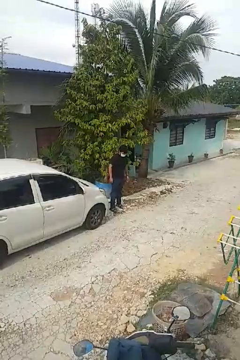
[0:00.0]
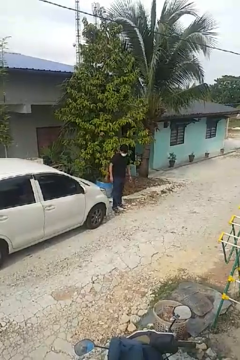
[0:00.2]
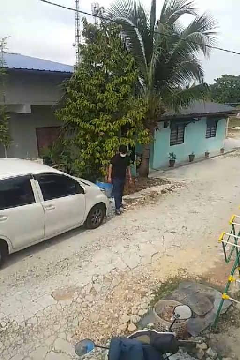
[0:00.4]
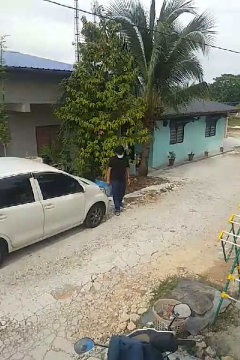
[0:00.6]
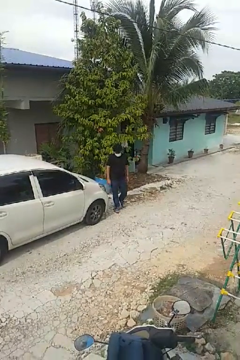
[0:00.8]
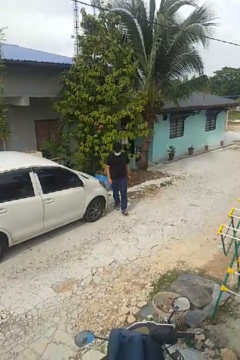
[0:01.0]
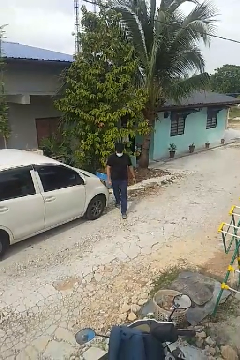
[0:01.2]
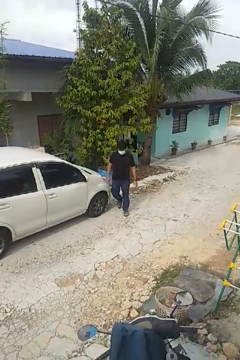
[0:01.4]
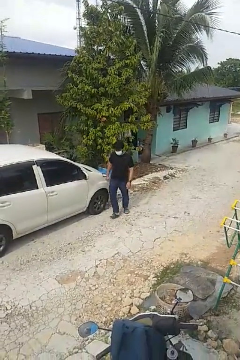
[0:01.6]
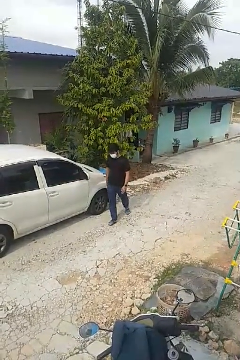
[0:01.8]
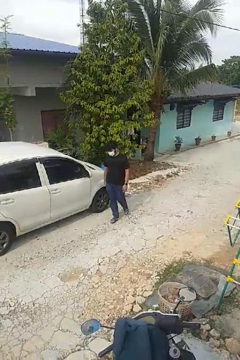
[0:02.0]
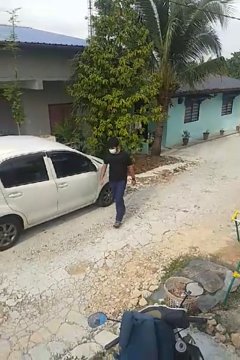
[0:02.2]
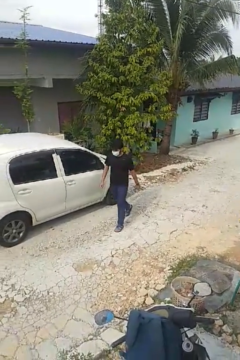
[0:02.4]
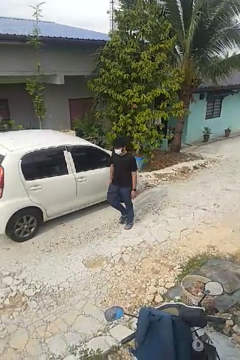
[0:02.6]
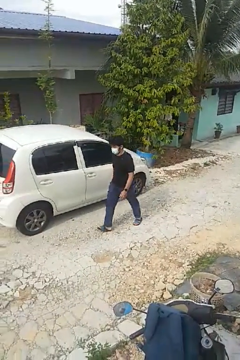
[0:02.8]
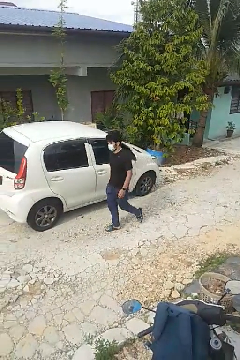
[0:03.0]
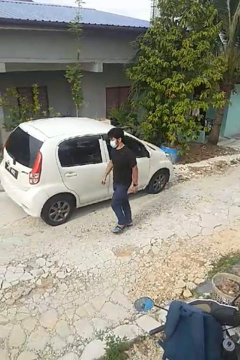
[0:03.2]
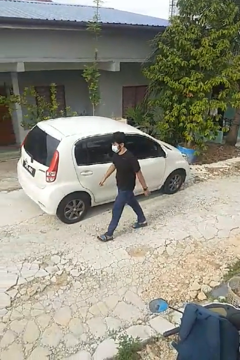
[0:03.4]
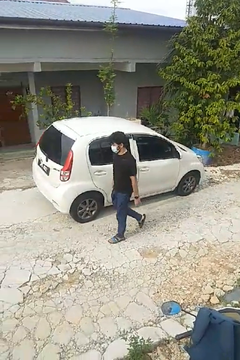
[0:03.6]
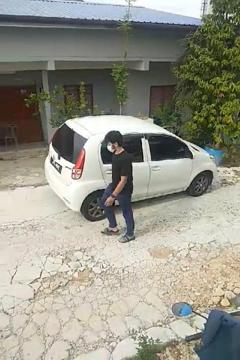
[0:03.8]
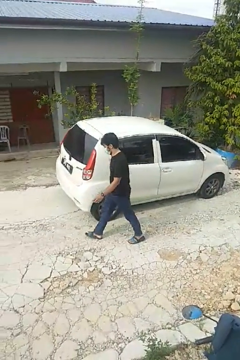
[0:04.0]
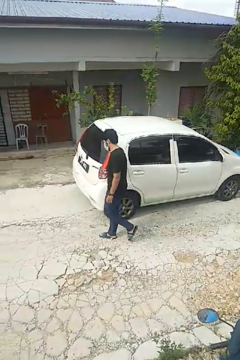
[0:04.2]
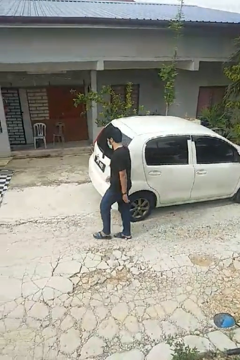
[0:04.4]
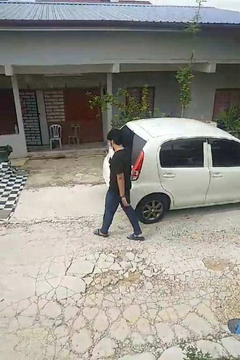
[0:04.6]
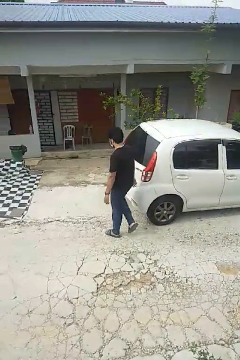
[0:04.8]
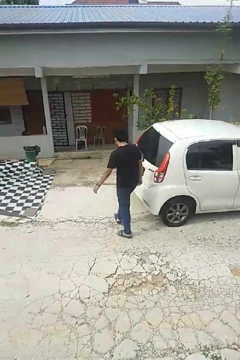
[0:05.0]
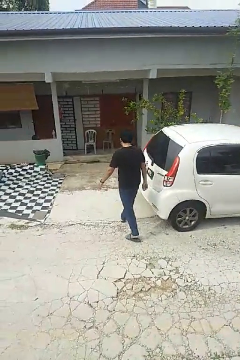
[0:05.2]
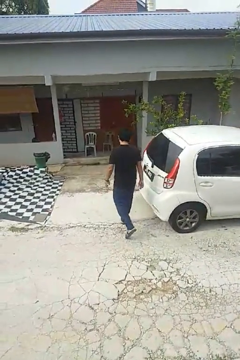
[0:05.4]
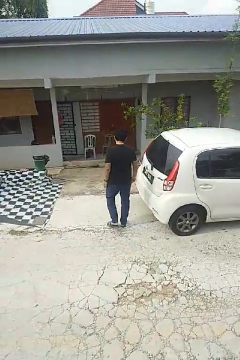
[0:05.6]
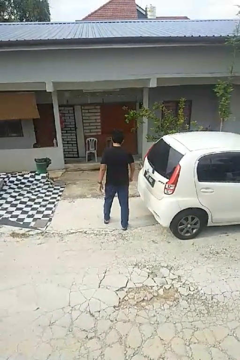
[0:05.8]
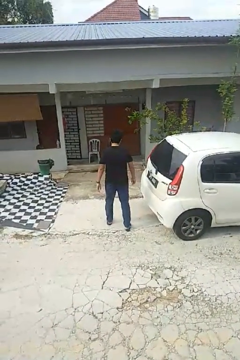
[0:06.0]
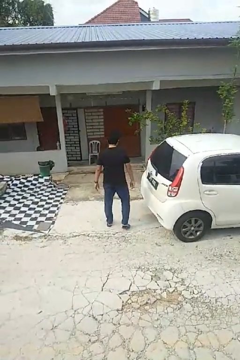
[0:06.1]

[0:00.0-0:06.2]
person walks around car

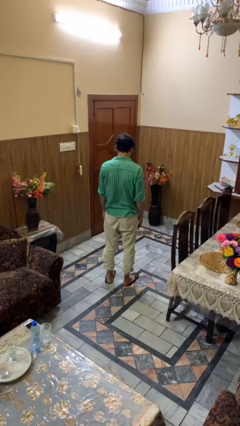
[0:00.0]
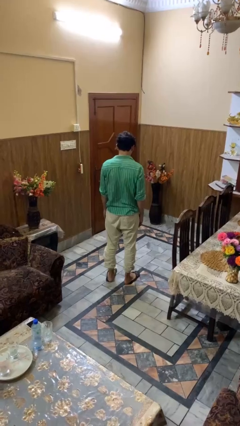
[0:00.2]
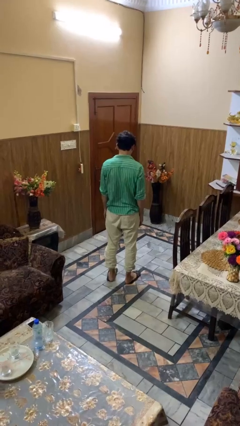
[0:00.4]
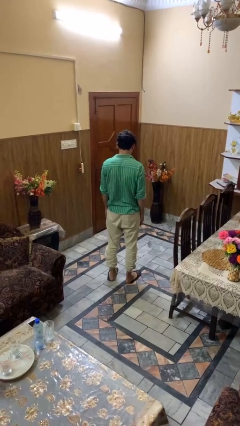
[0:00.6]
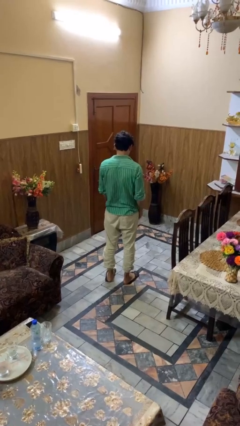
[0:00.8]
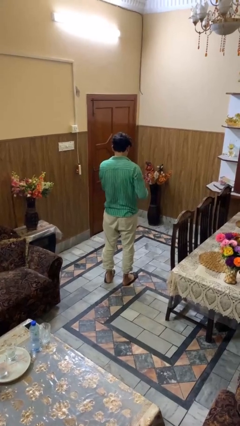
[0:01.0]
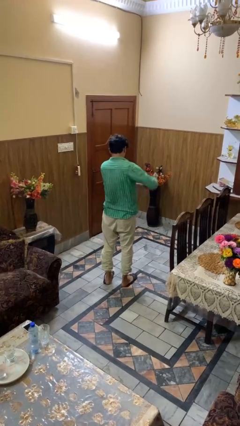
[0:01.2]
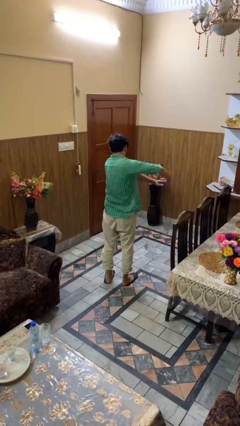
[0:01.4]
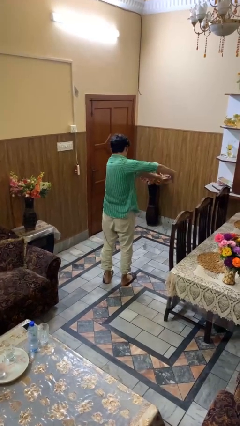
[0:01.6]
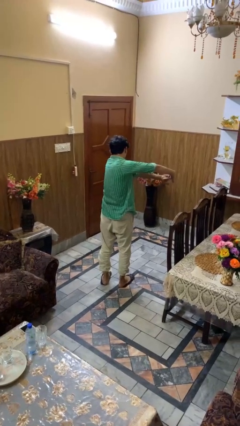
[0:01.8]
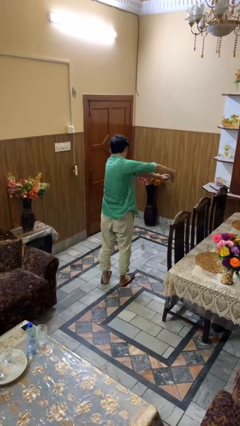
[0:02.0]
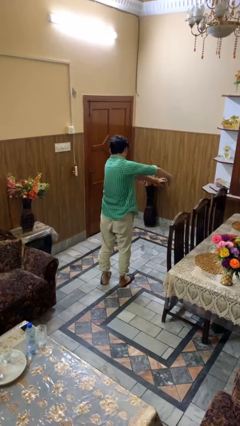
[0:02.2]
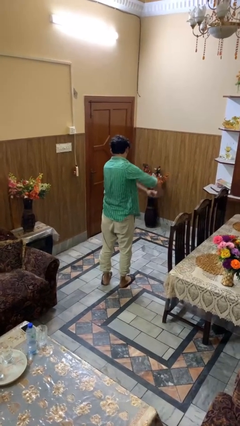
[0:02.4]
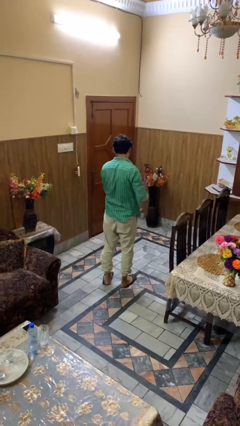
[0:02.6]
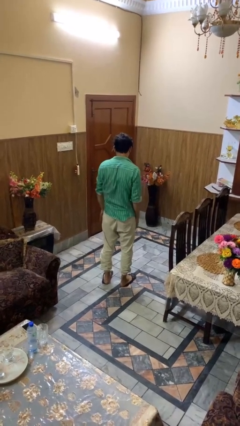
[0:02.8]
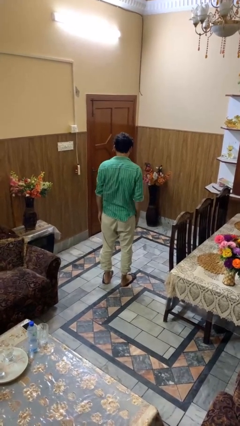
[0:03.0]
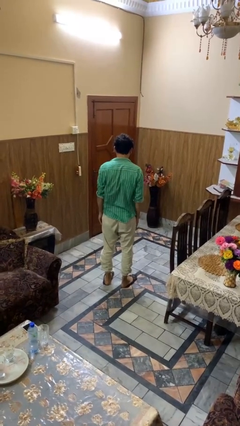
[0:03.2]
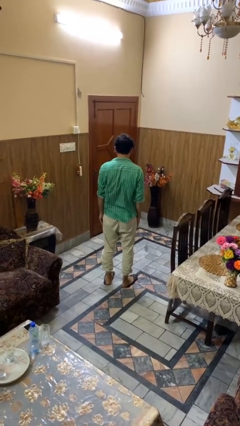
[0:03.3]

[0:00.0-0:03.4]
person stretches arms to side

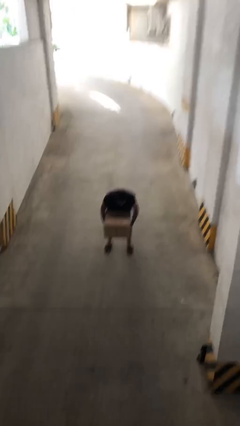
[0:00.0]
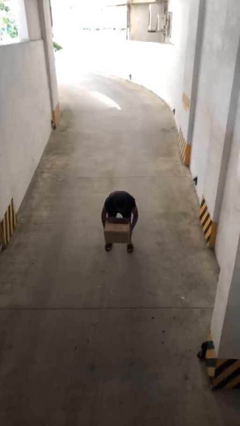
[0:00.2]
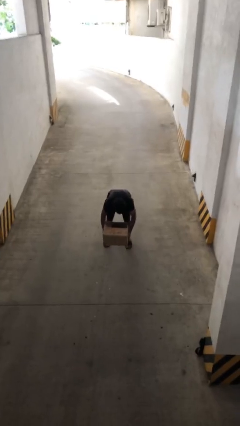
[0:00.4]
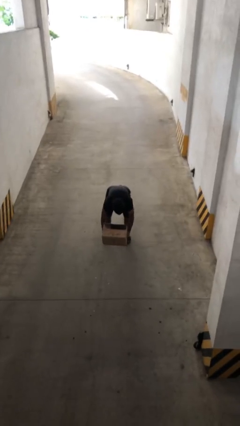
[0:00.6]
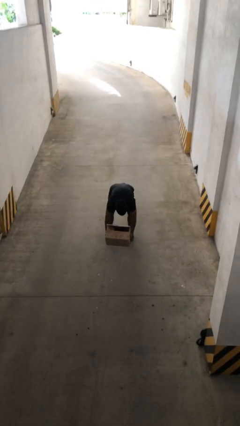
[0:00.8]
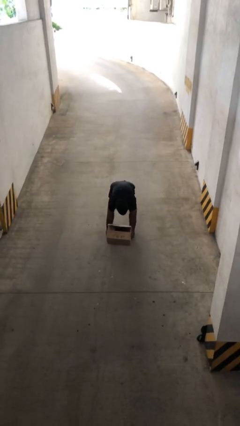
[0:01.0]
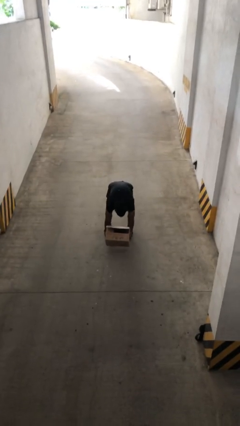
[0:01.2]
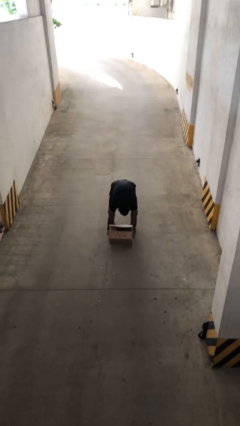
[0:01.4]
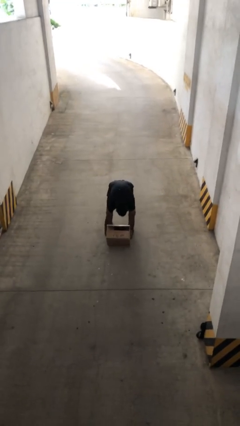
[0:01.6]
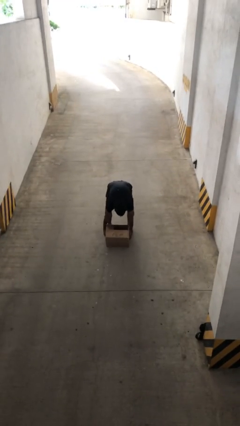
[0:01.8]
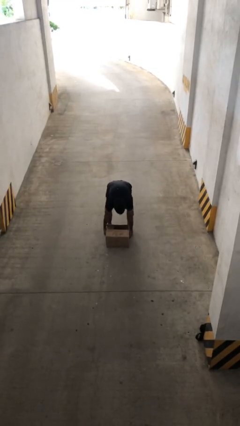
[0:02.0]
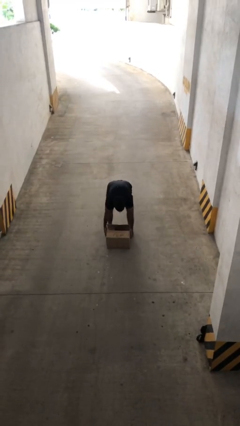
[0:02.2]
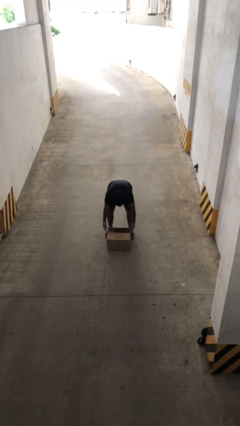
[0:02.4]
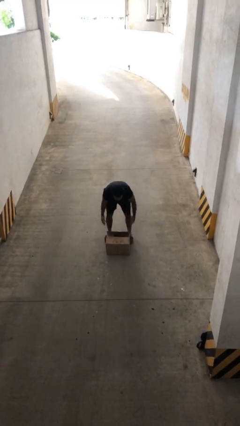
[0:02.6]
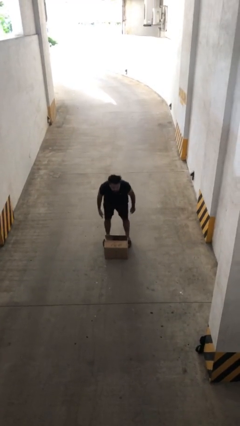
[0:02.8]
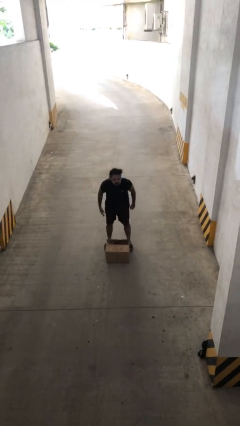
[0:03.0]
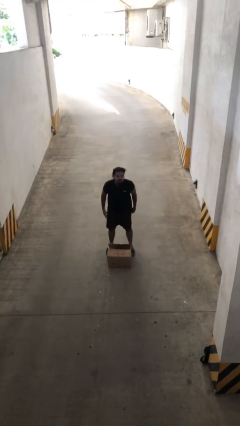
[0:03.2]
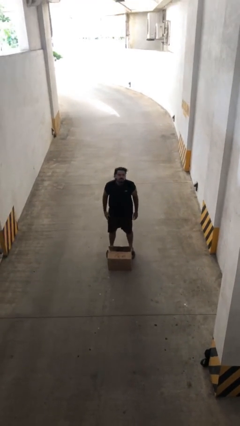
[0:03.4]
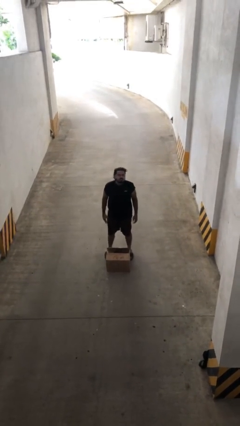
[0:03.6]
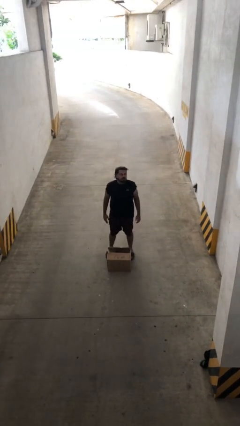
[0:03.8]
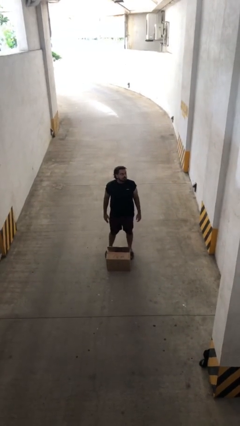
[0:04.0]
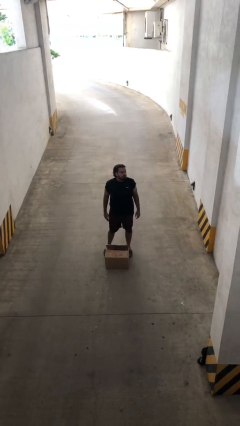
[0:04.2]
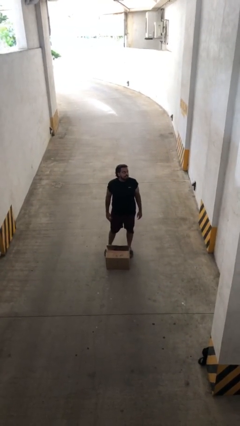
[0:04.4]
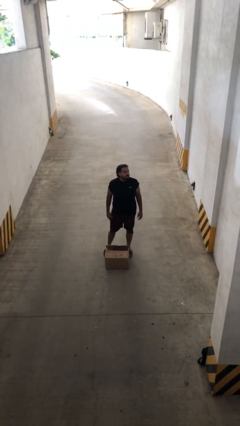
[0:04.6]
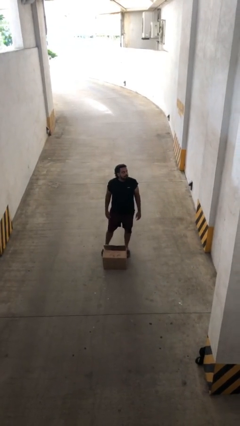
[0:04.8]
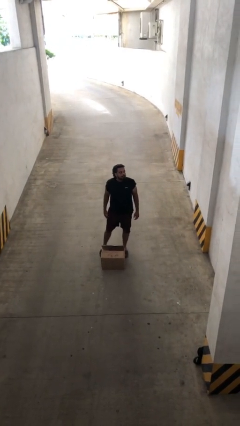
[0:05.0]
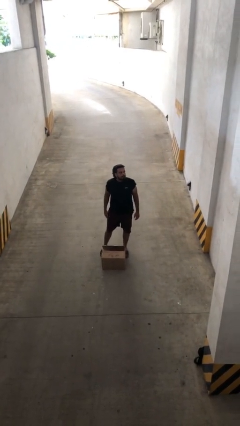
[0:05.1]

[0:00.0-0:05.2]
person puts down object on floor

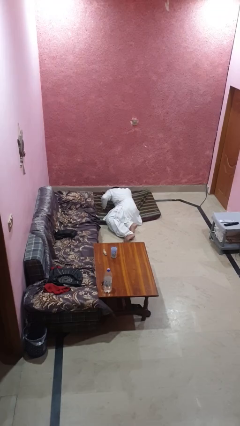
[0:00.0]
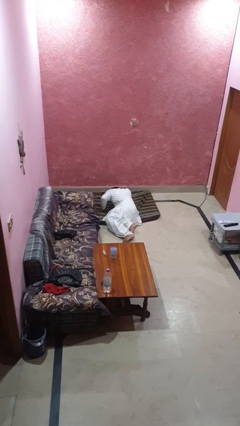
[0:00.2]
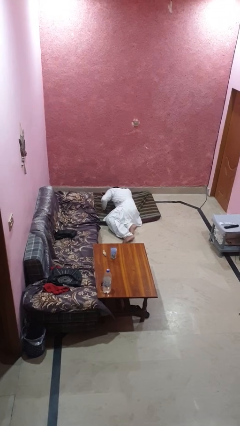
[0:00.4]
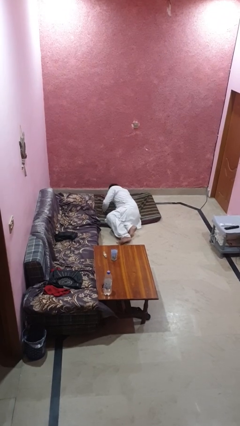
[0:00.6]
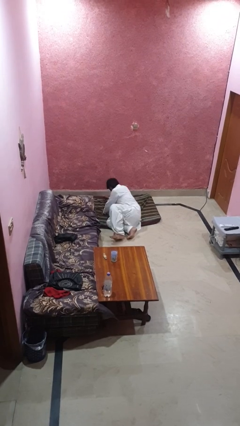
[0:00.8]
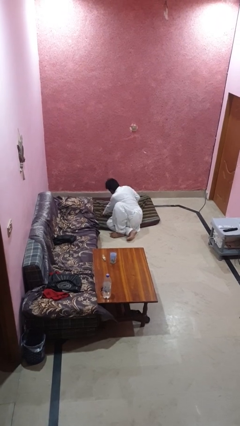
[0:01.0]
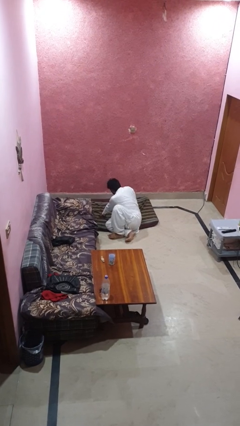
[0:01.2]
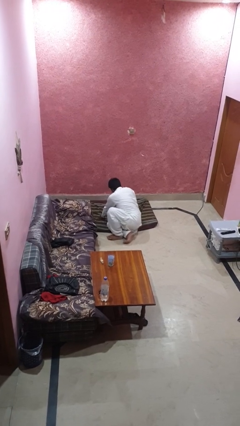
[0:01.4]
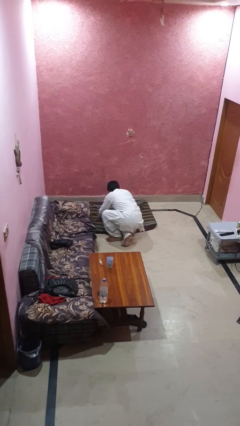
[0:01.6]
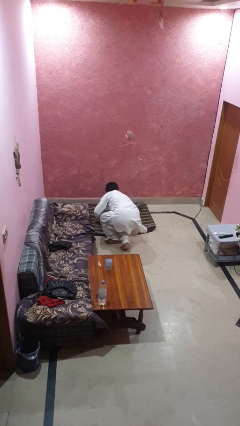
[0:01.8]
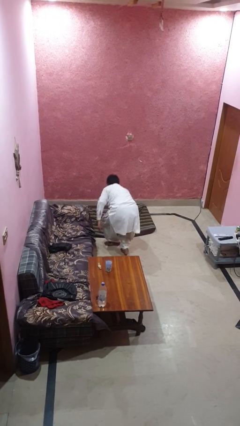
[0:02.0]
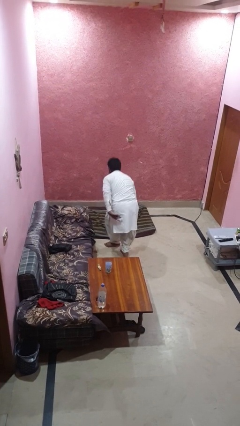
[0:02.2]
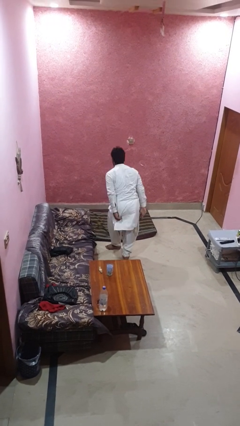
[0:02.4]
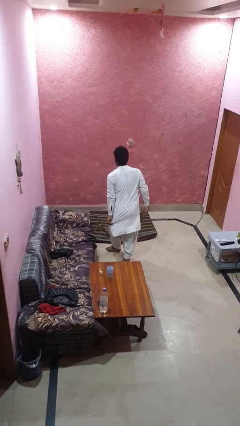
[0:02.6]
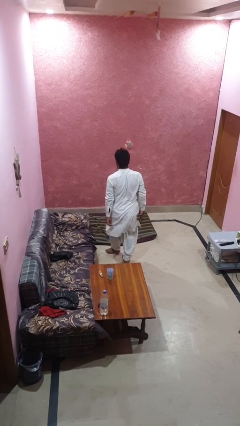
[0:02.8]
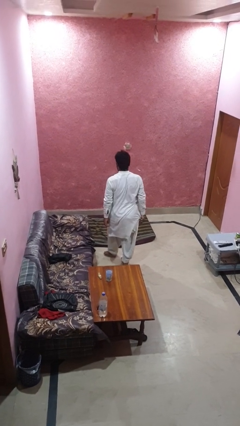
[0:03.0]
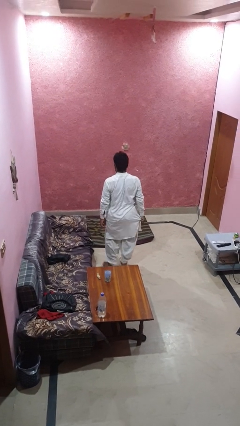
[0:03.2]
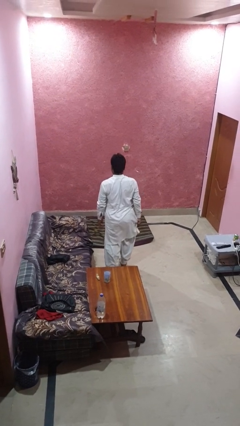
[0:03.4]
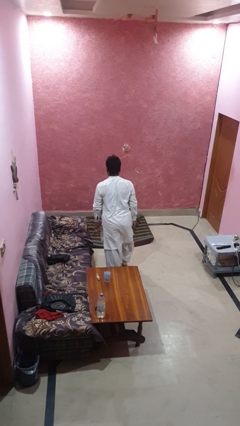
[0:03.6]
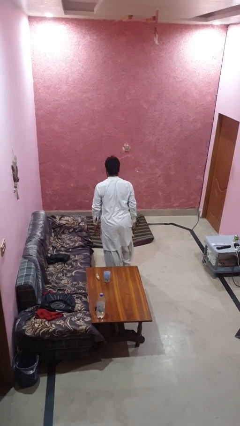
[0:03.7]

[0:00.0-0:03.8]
person stands up from floor

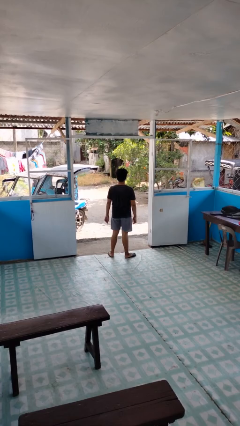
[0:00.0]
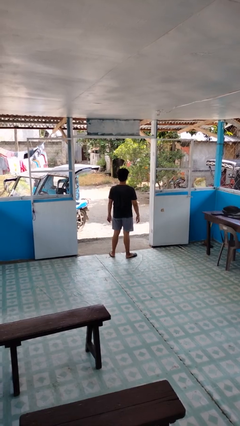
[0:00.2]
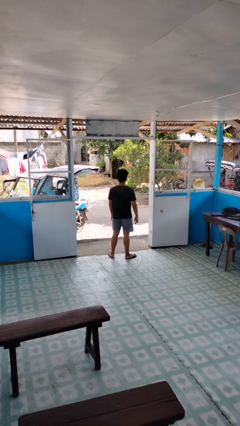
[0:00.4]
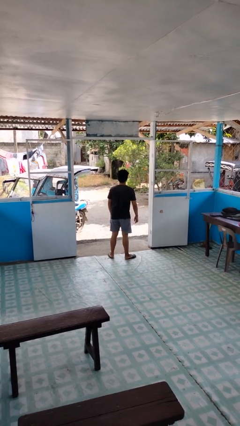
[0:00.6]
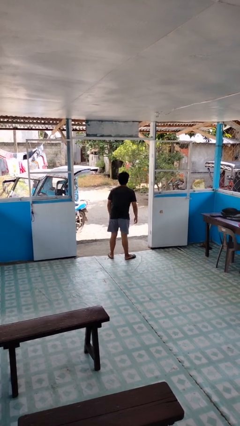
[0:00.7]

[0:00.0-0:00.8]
person wiggles hips
